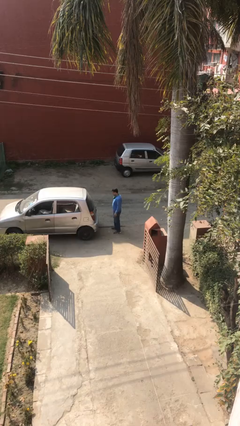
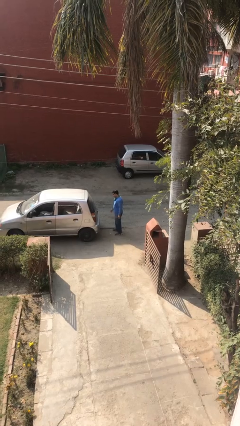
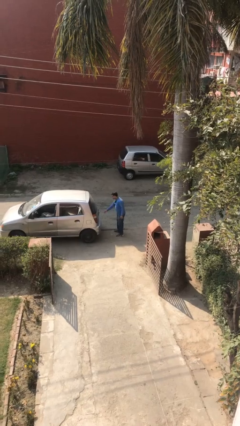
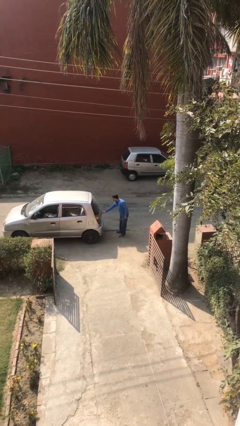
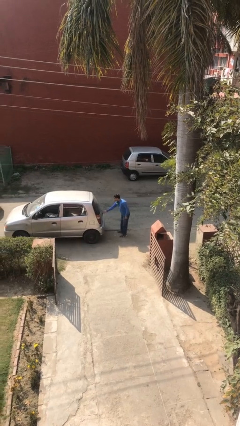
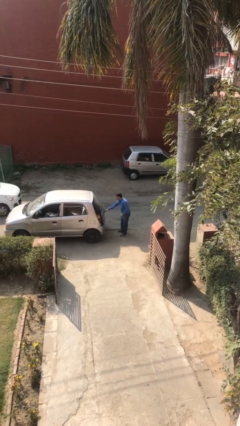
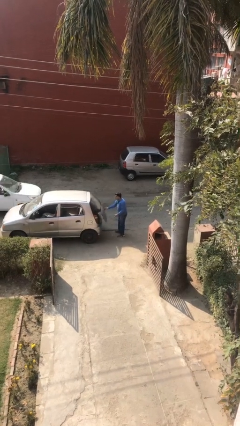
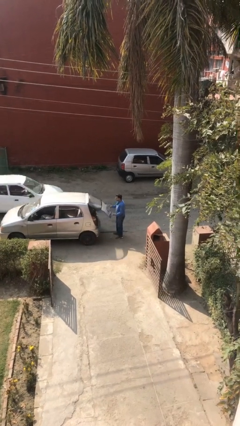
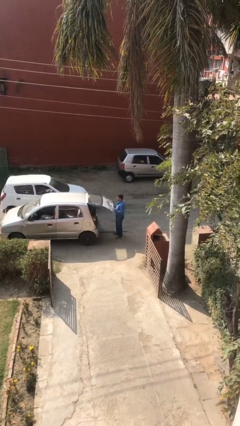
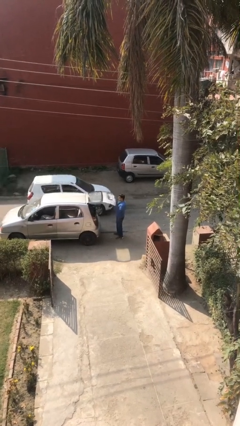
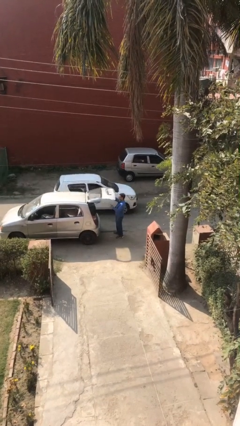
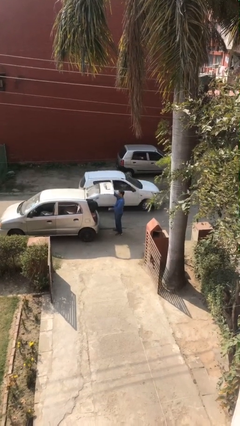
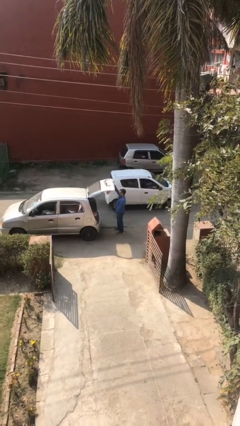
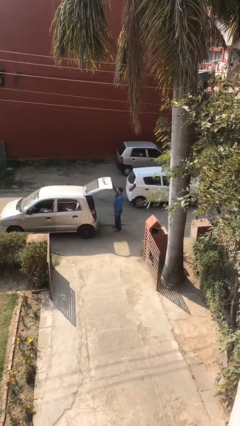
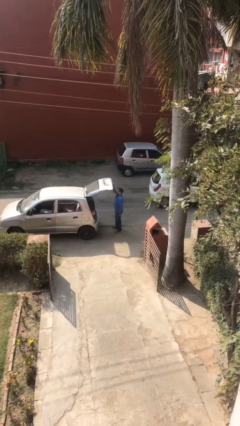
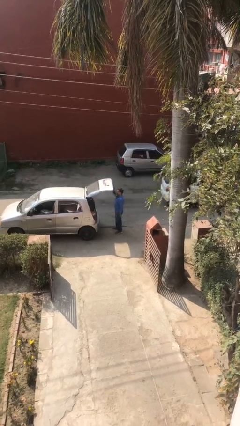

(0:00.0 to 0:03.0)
person opens car trunk

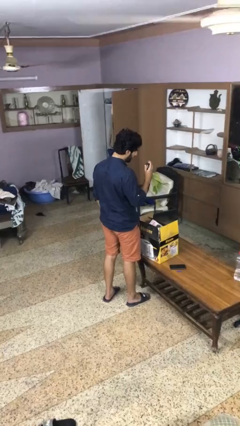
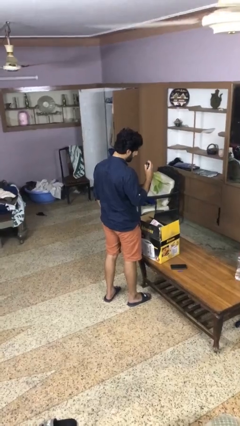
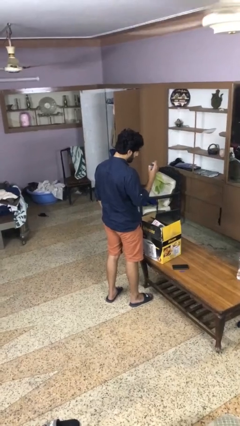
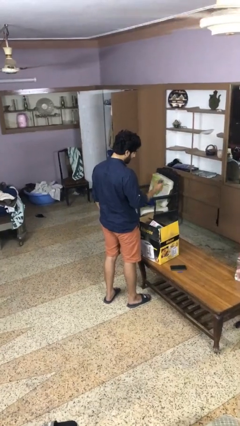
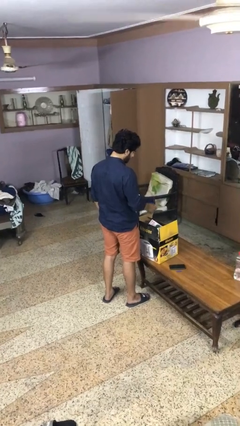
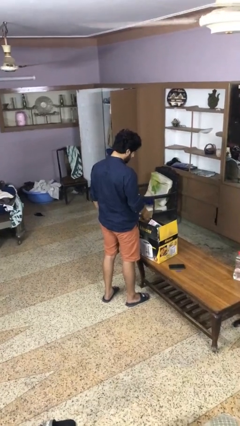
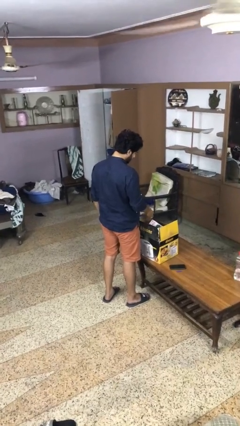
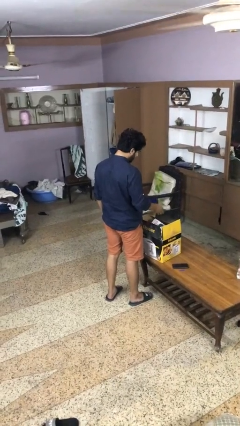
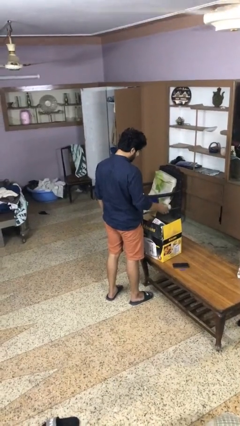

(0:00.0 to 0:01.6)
person puts object into box

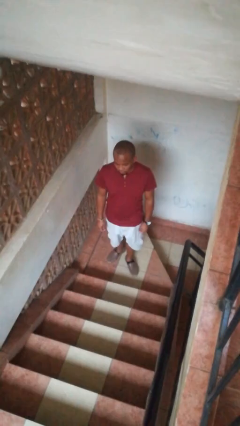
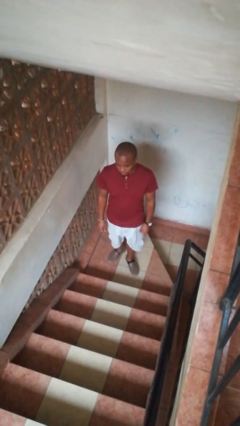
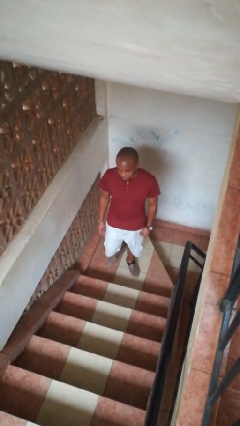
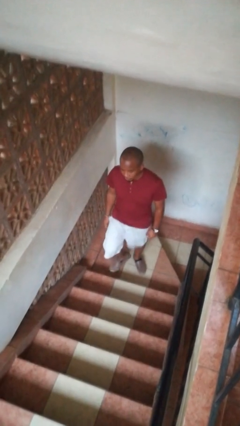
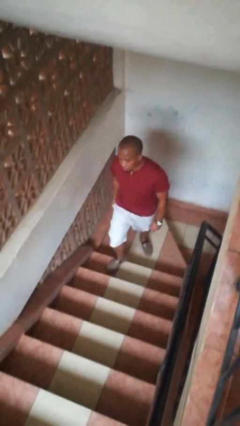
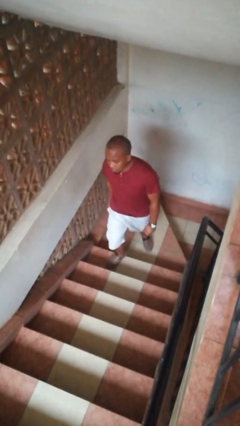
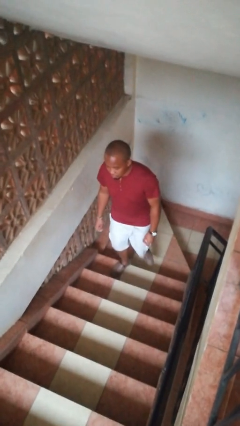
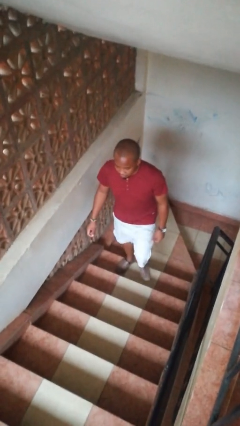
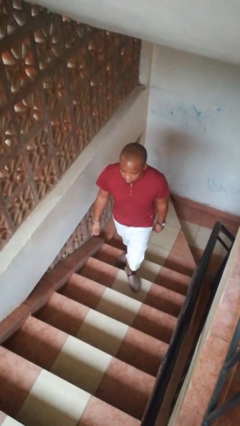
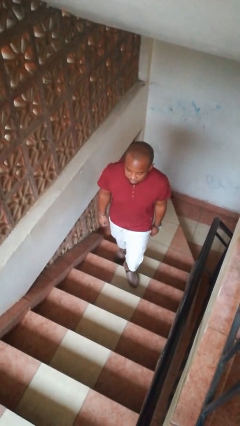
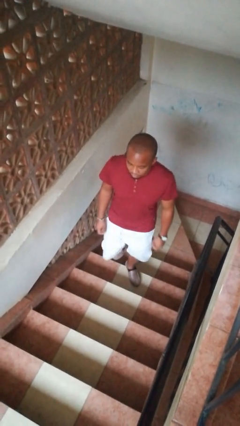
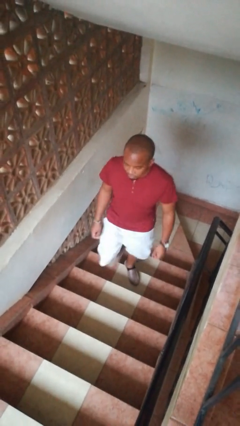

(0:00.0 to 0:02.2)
person climbs up stairs

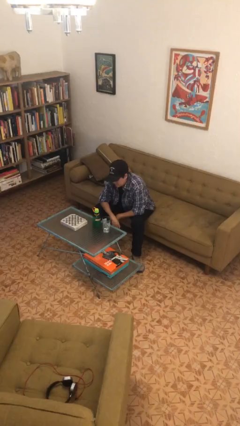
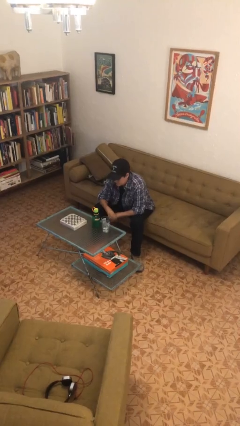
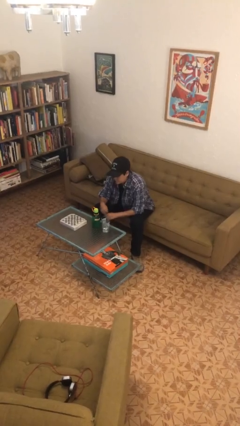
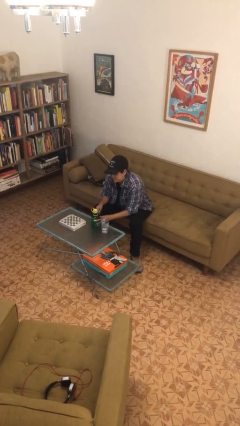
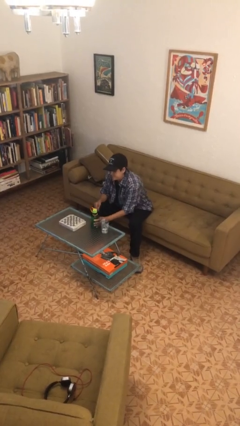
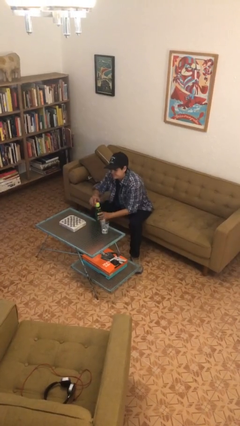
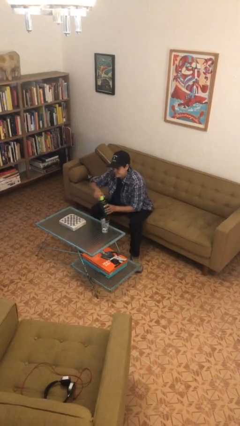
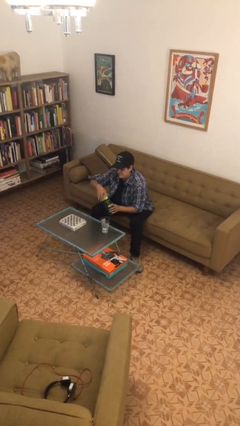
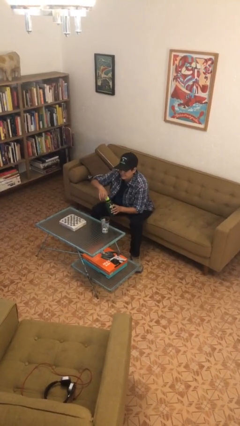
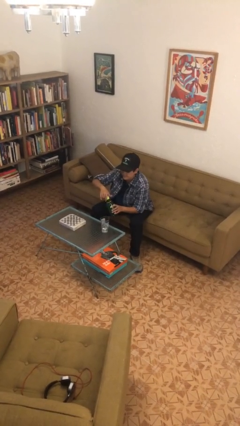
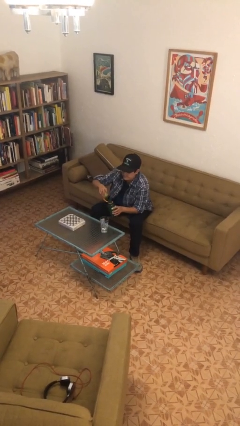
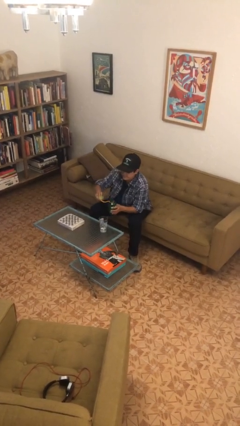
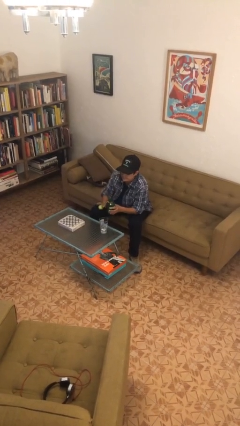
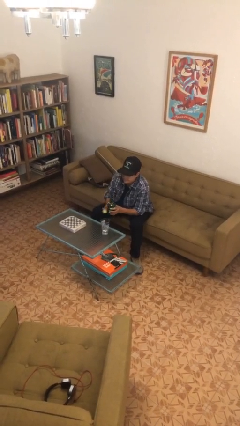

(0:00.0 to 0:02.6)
person unscrews lid from bottle

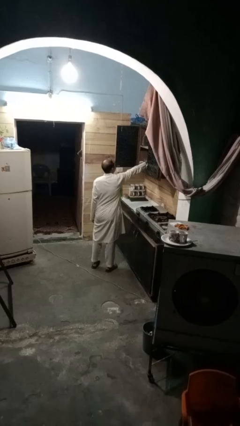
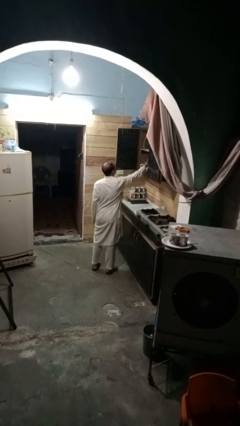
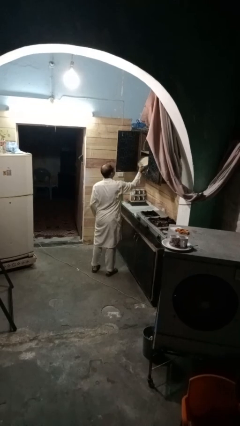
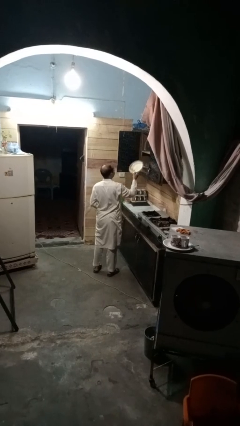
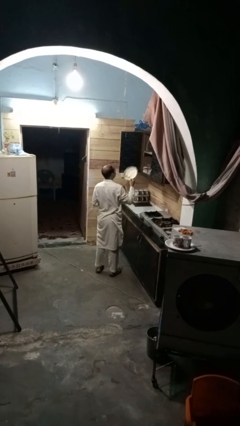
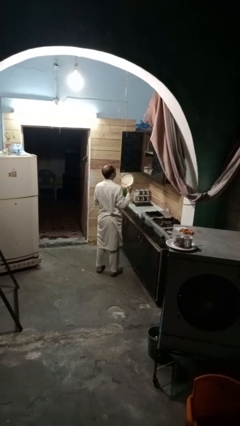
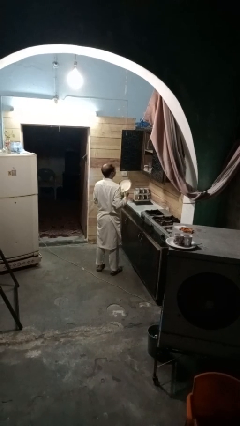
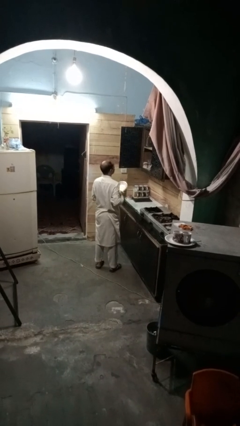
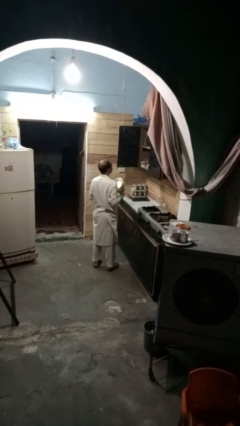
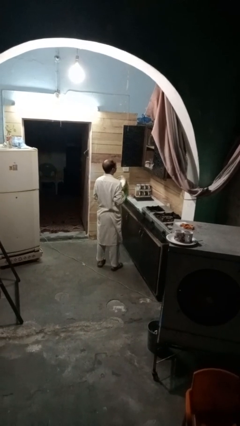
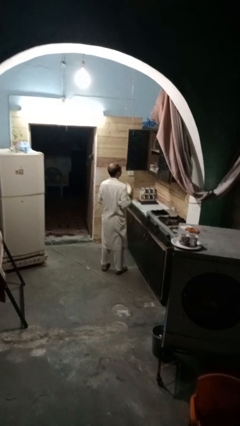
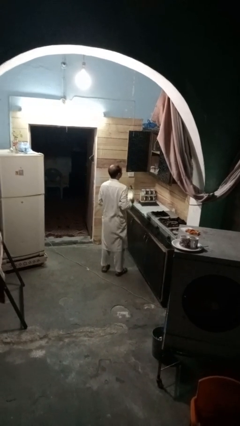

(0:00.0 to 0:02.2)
person takes object from cabinet

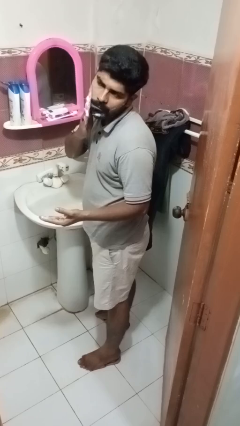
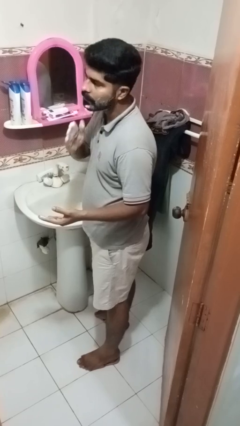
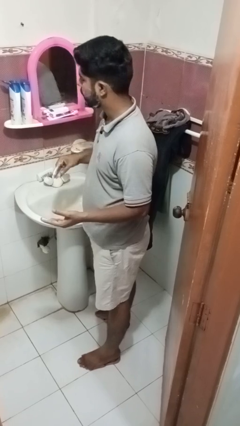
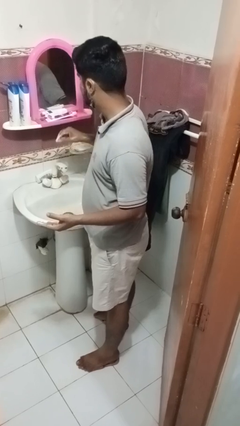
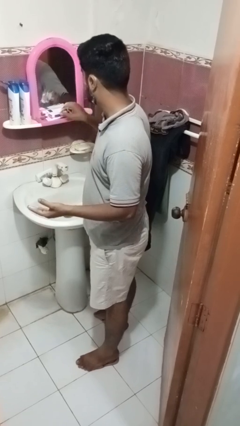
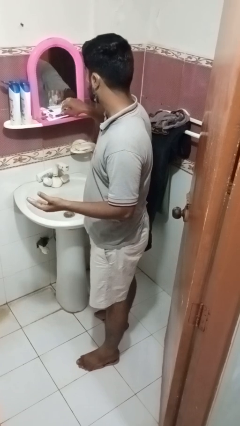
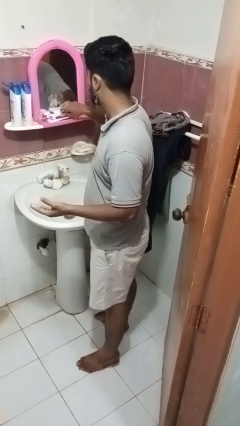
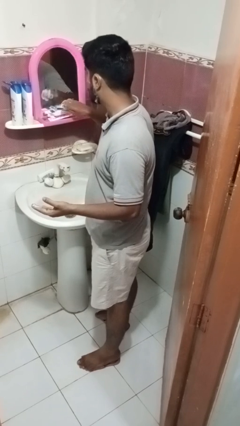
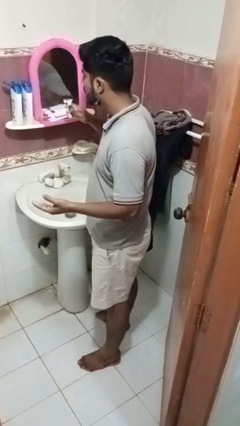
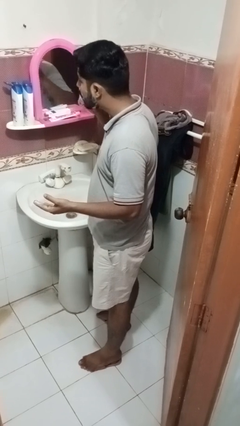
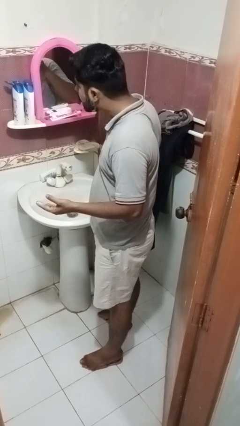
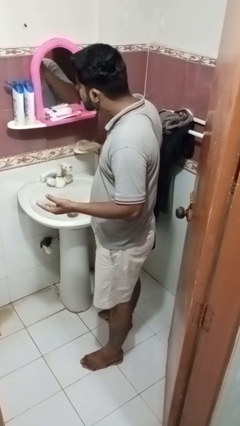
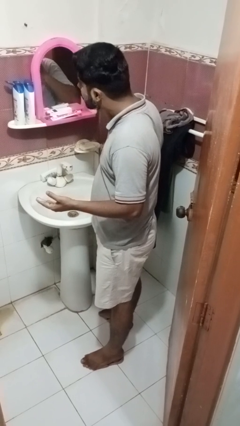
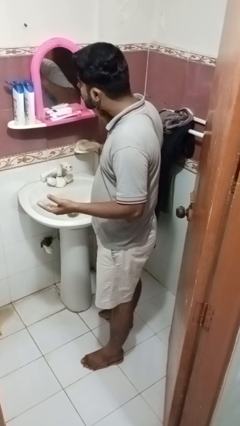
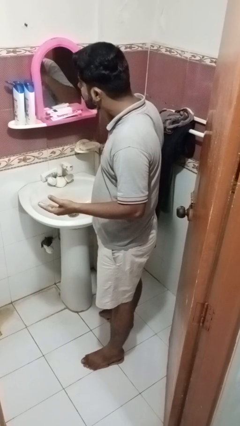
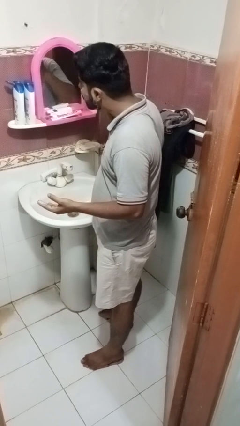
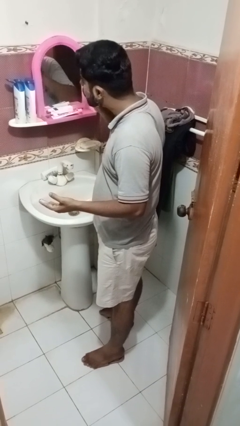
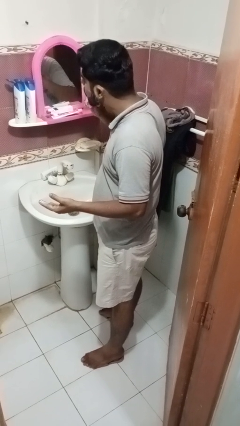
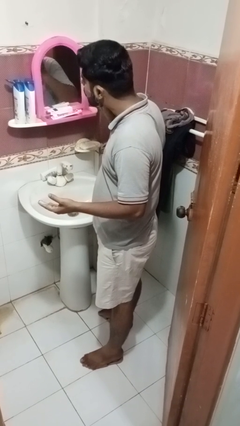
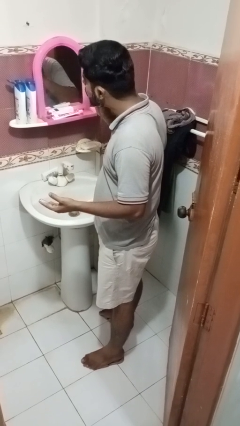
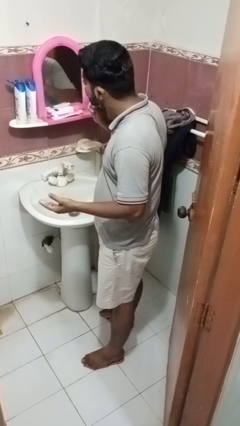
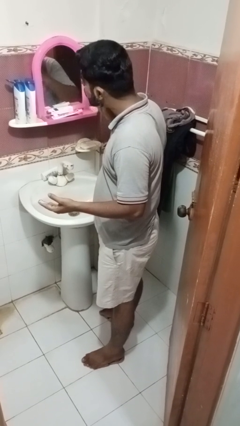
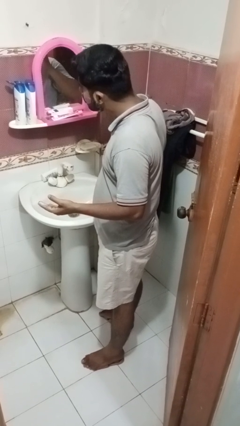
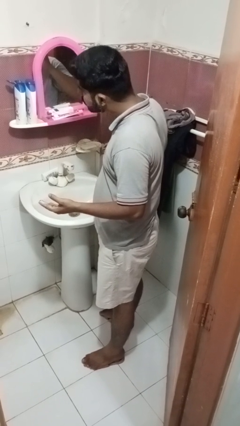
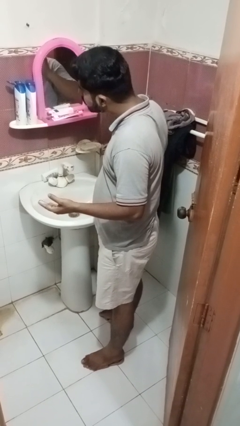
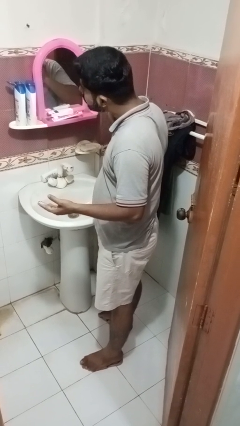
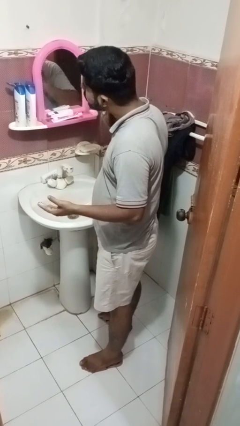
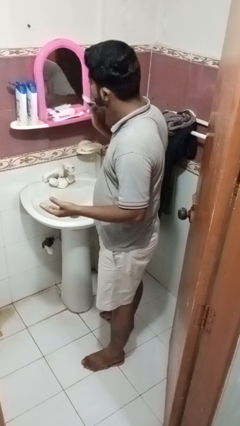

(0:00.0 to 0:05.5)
person shaves face

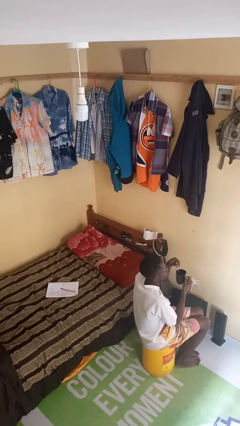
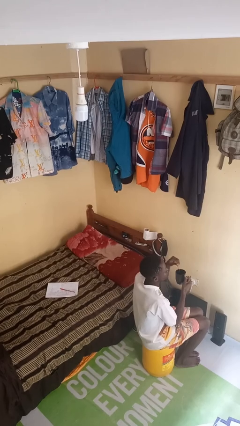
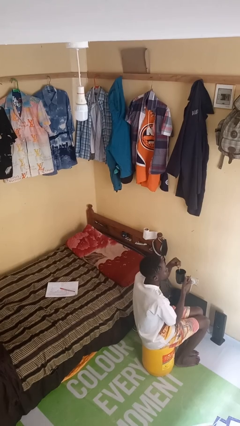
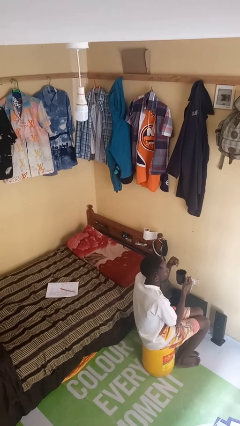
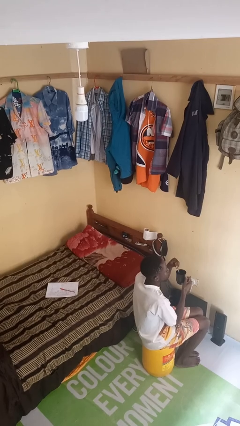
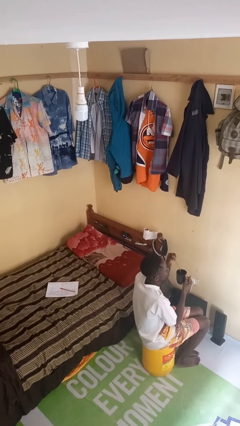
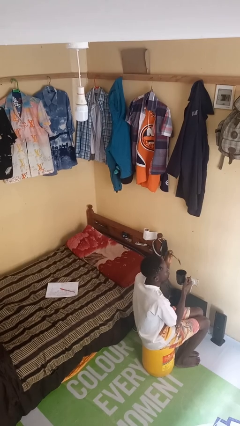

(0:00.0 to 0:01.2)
person stirs mug
